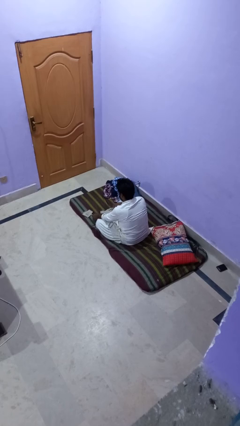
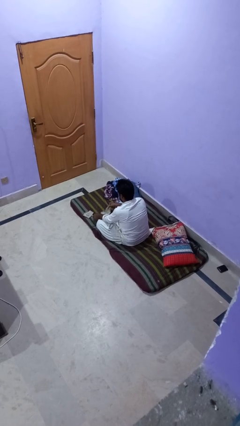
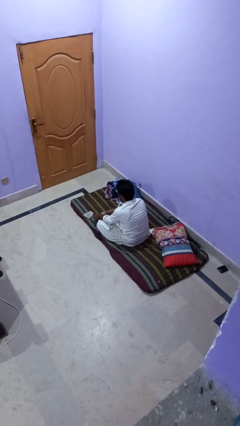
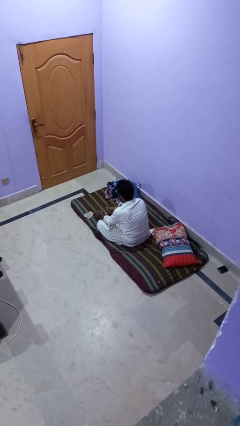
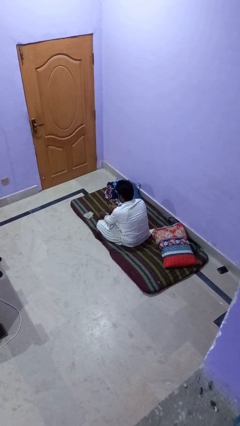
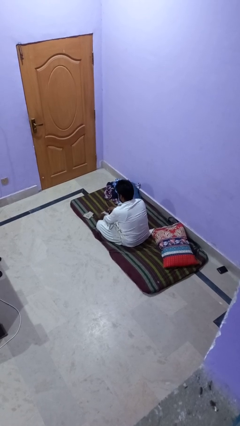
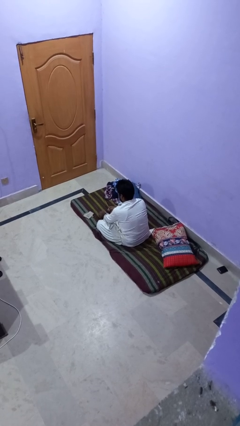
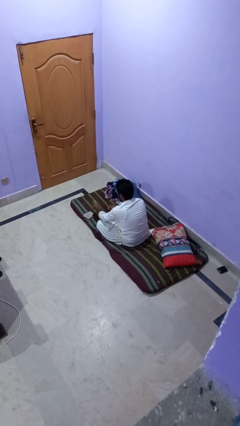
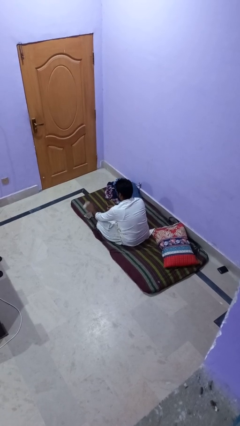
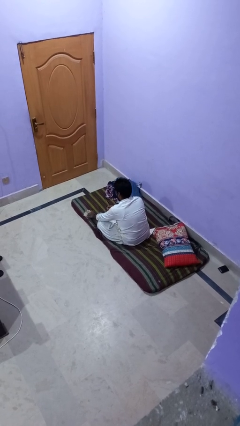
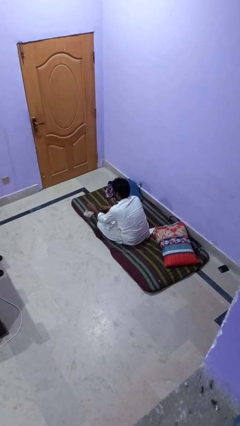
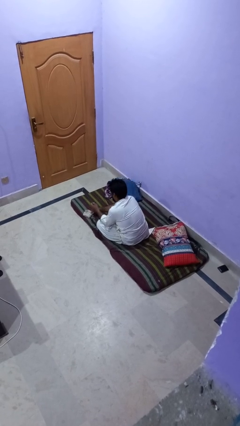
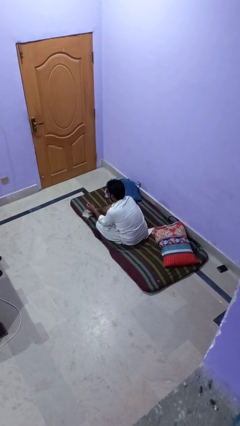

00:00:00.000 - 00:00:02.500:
person folds socks

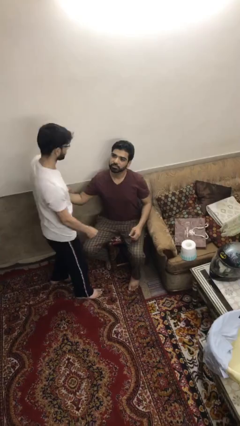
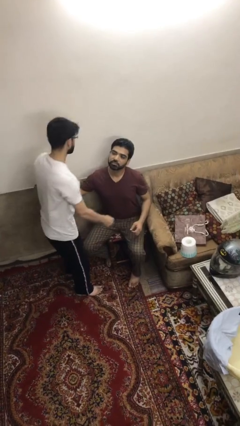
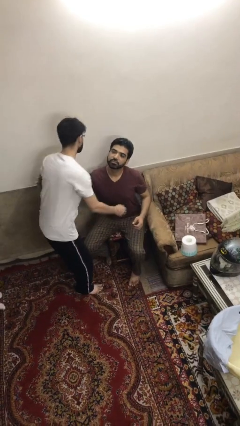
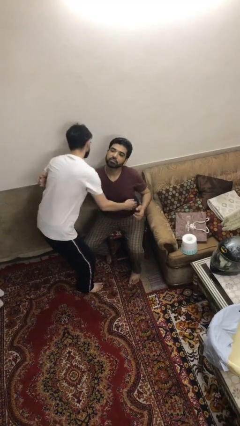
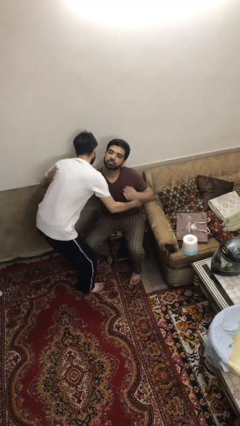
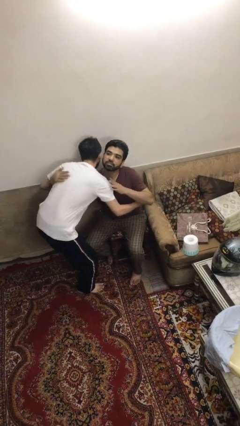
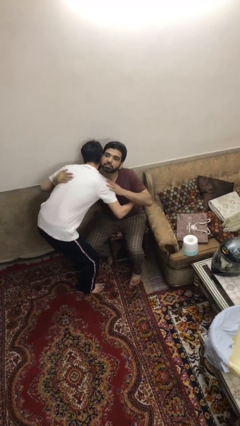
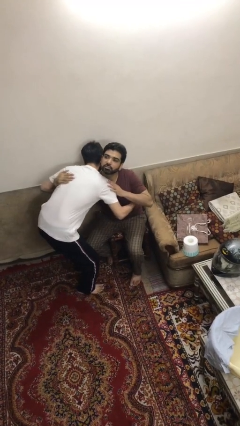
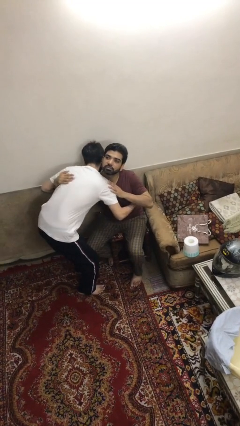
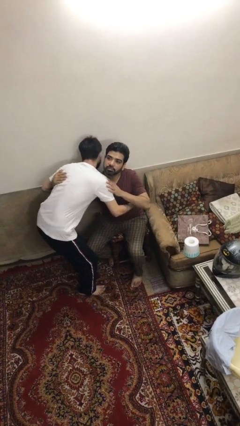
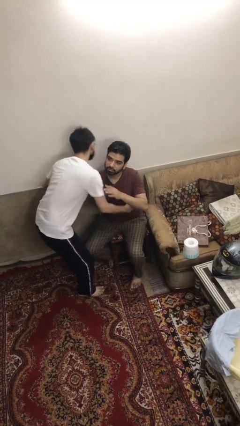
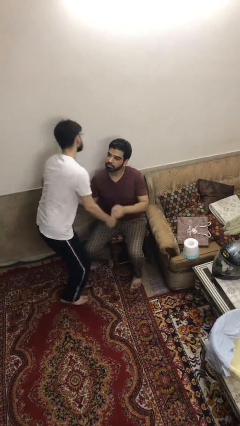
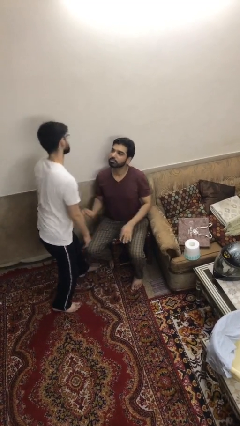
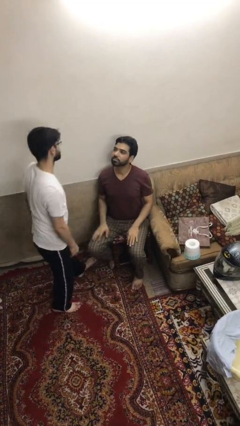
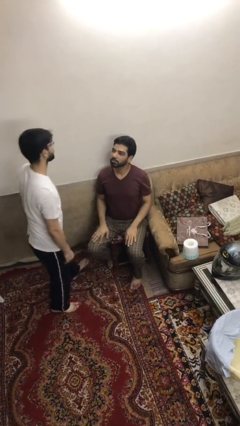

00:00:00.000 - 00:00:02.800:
person embraces person

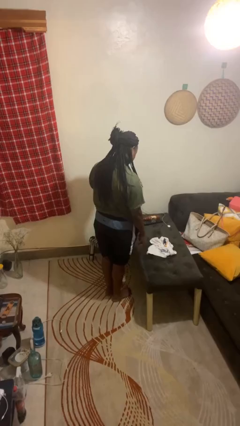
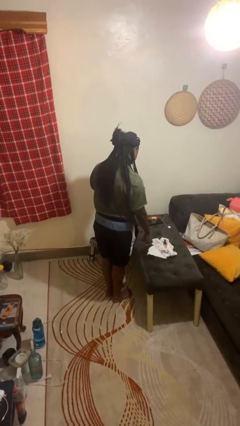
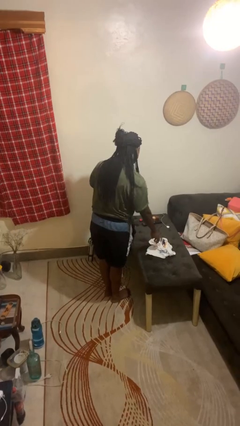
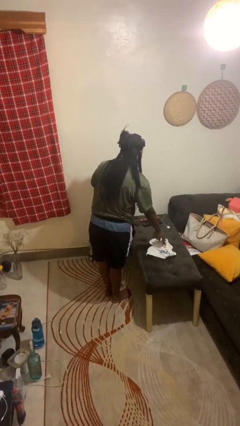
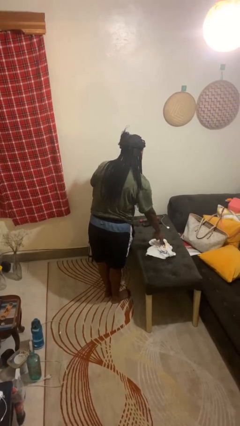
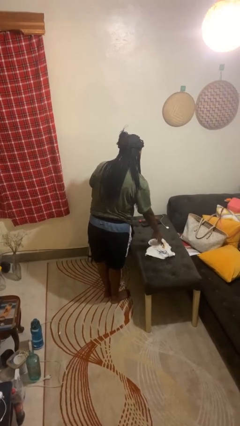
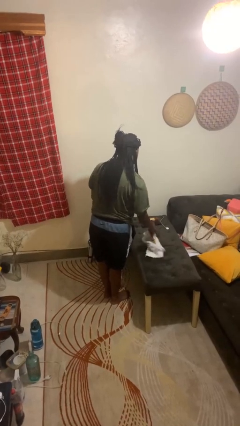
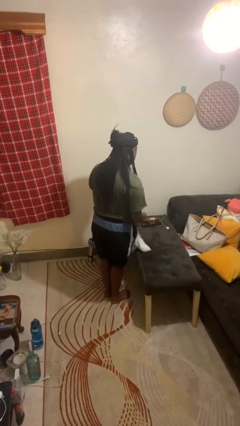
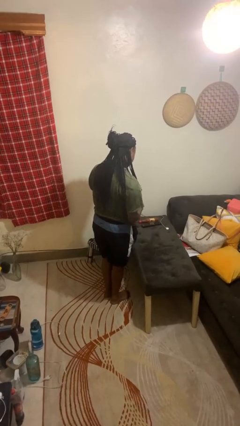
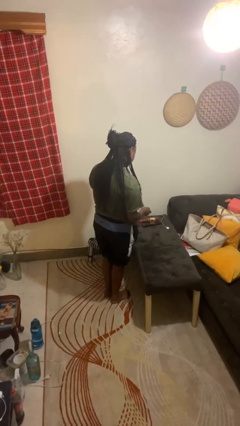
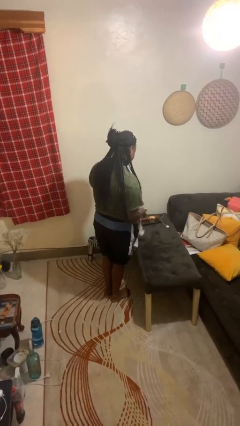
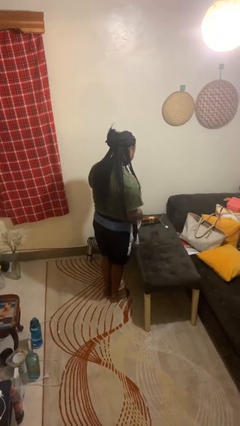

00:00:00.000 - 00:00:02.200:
person picks up object from table

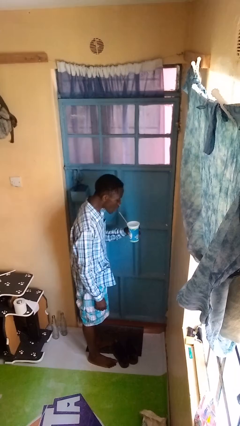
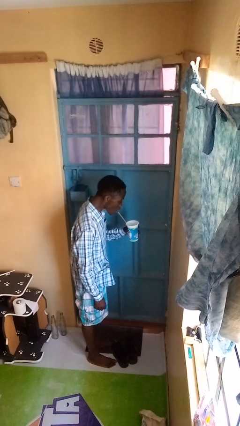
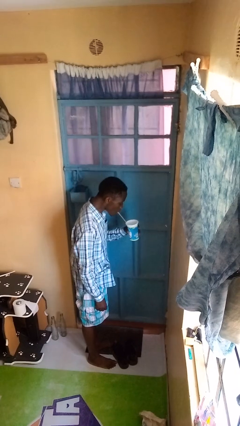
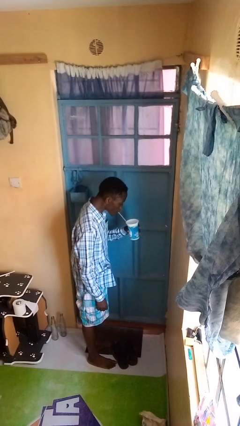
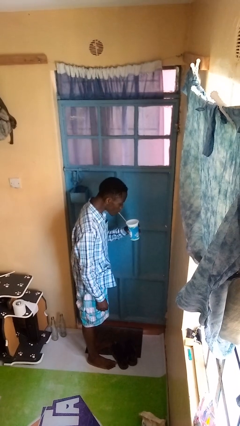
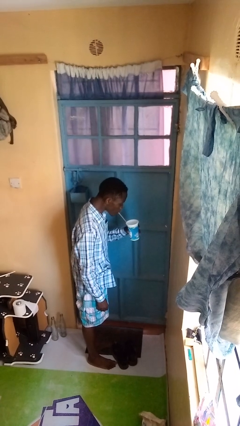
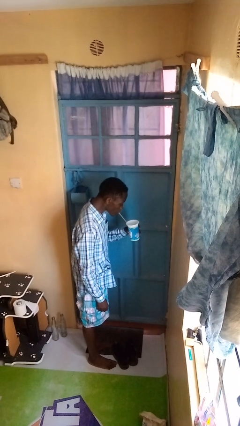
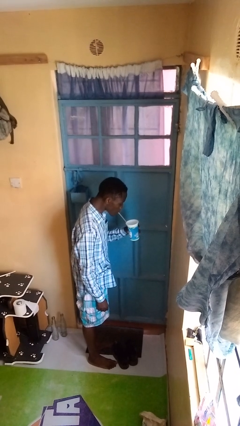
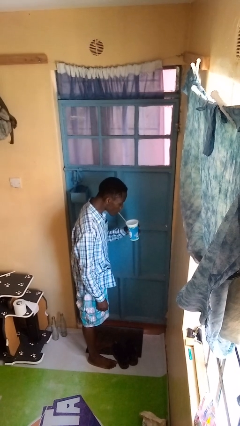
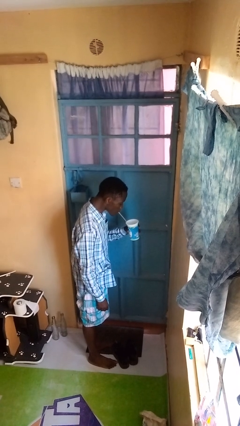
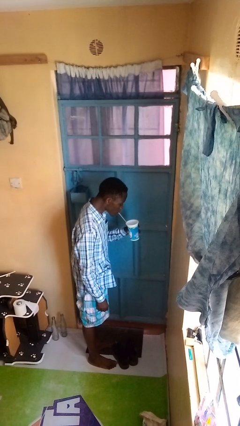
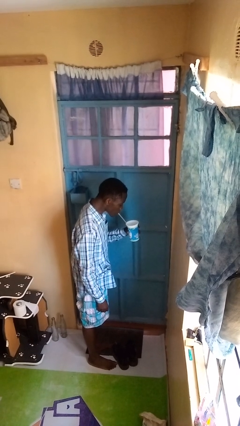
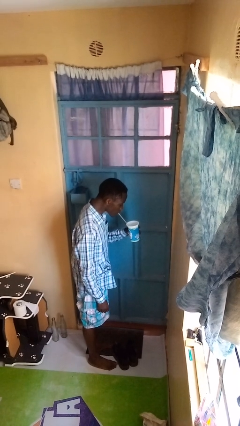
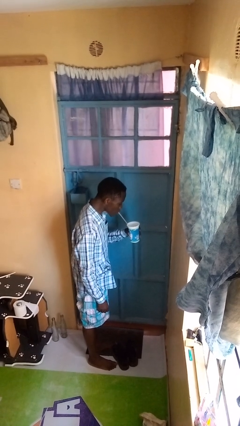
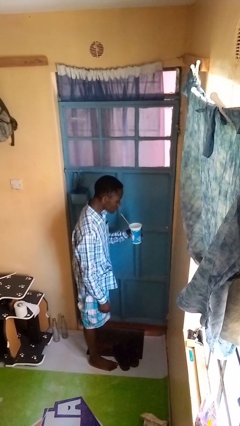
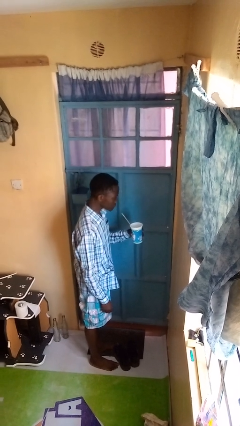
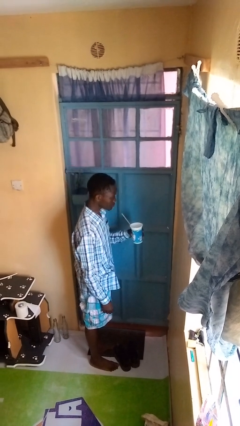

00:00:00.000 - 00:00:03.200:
person drinks from straw

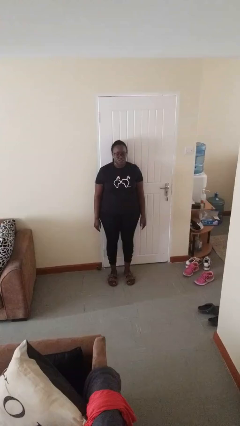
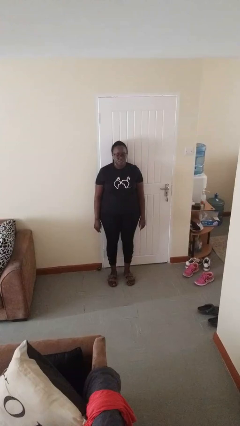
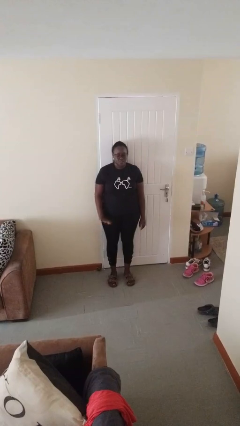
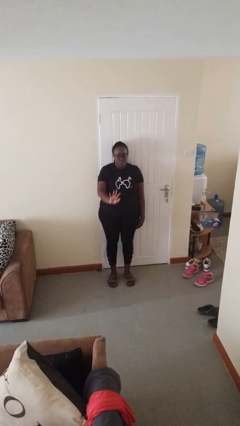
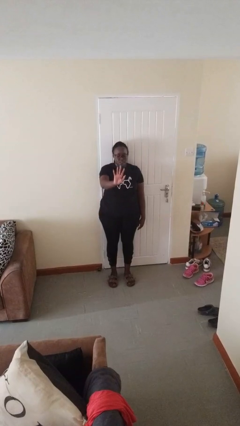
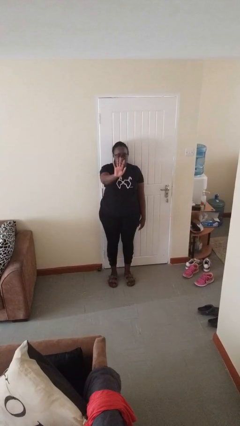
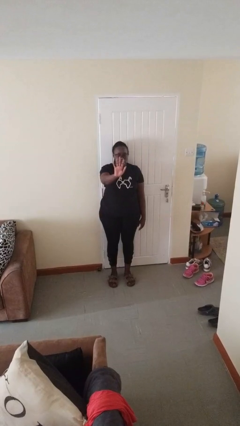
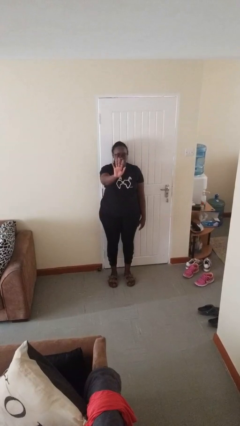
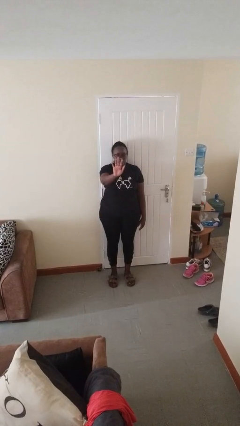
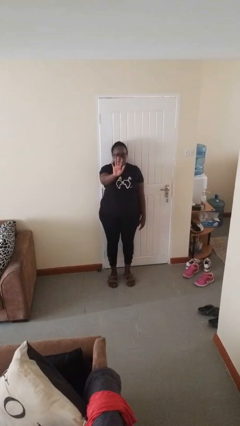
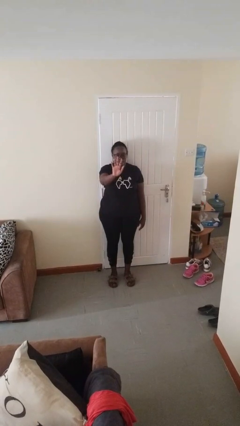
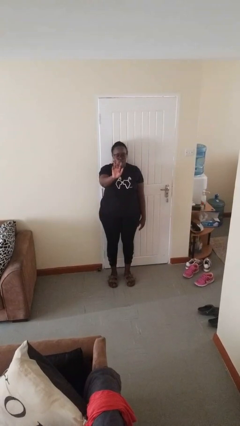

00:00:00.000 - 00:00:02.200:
person gestures number five

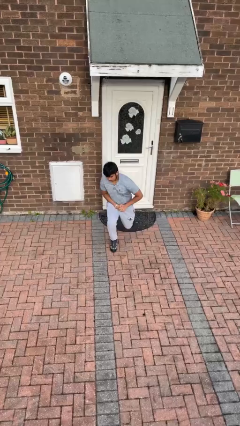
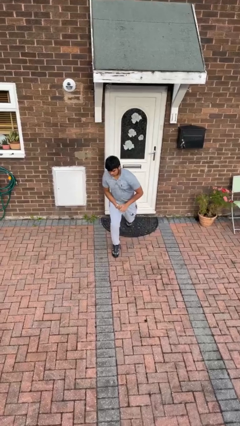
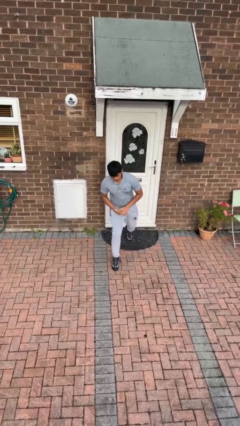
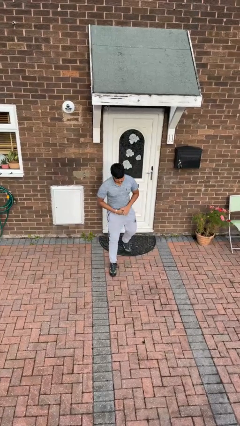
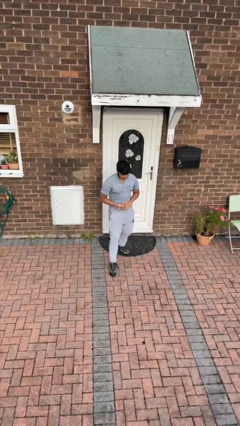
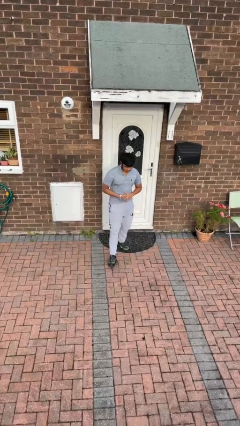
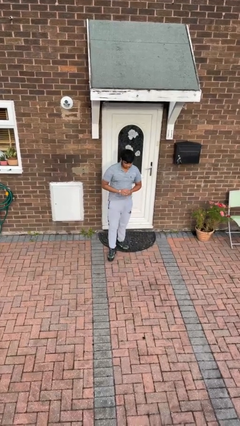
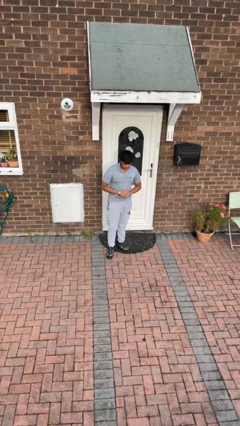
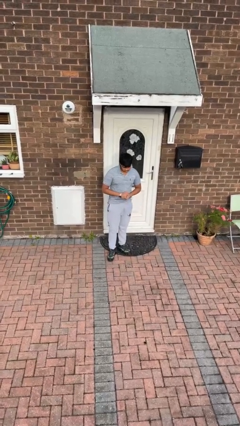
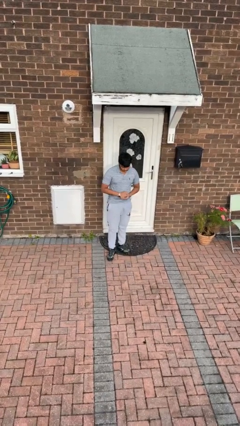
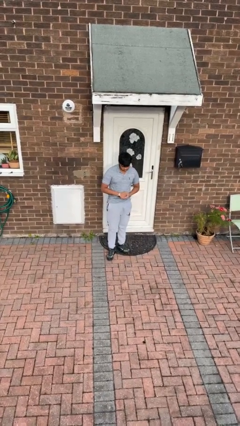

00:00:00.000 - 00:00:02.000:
person stands up from floor

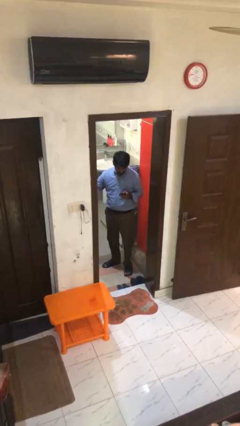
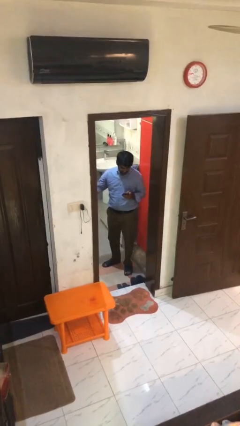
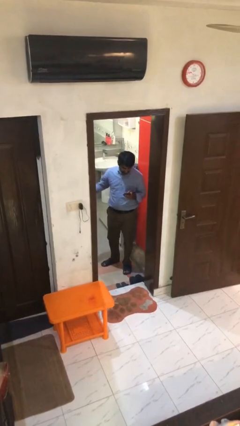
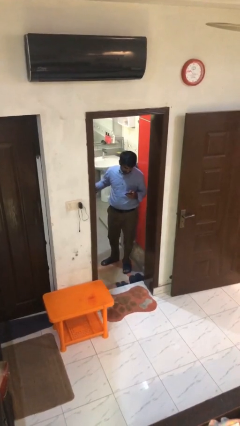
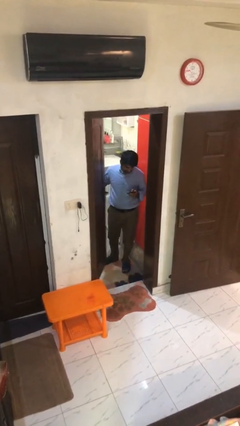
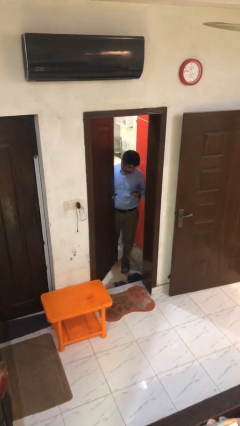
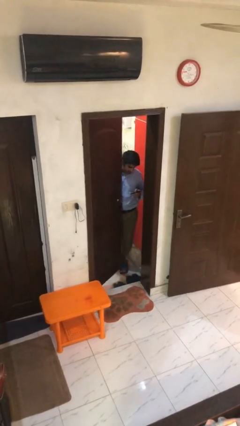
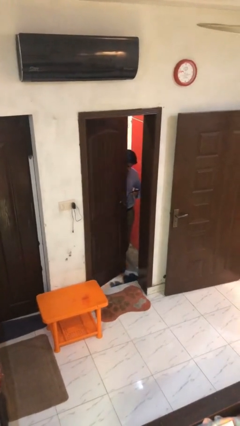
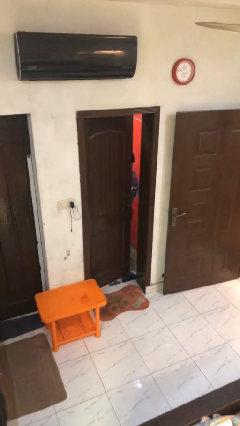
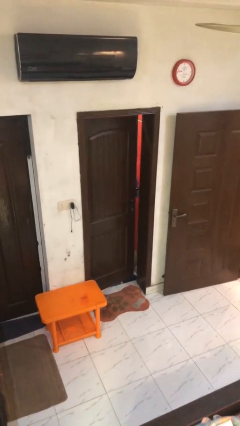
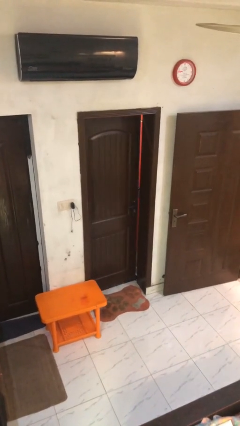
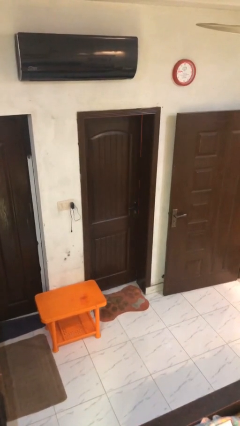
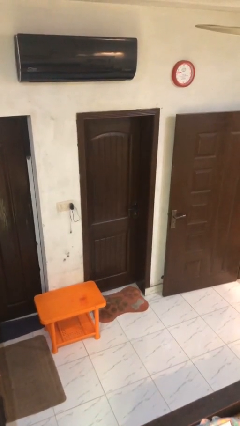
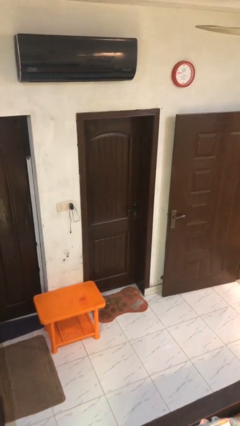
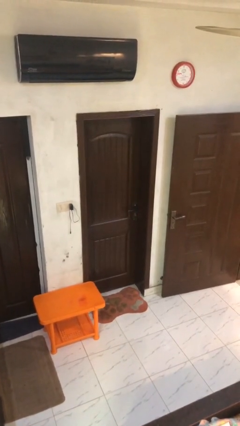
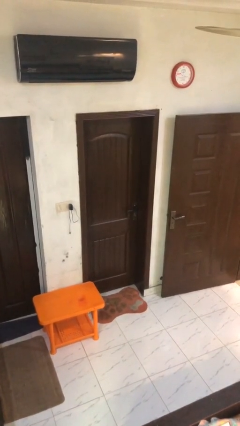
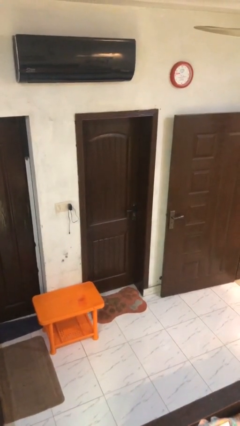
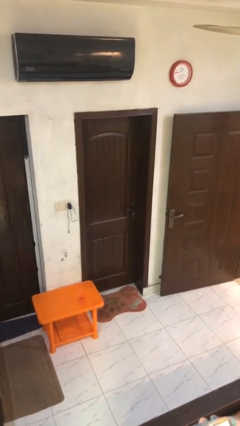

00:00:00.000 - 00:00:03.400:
person closes facility door
